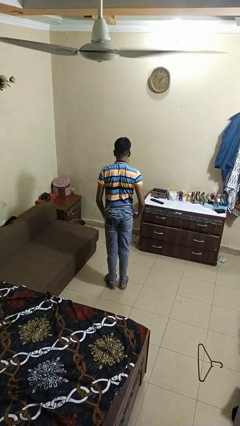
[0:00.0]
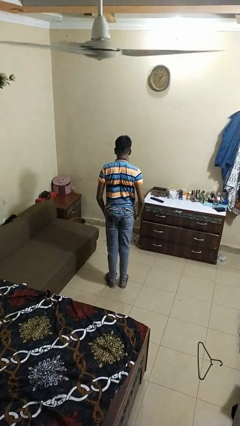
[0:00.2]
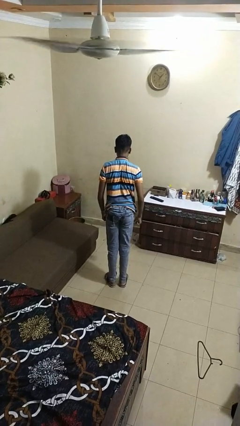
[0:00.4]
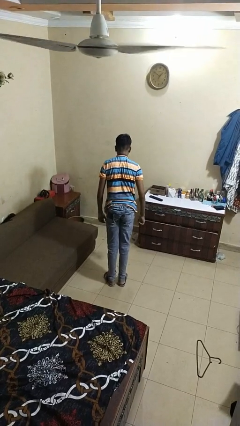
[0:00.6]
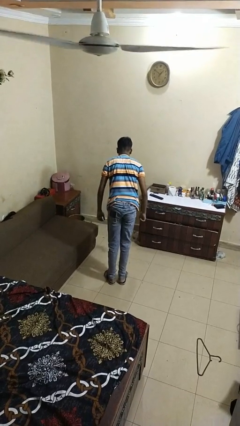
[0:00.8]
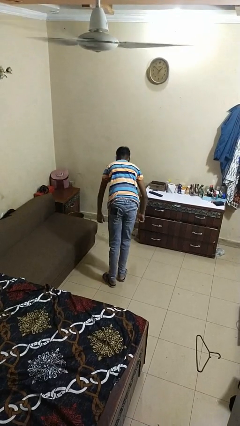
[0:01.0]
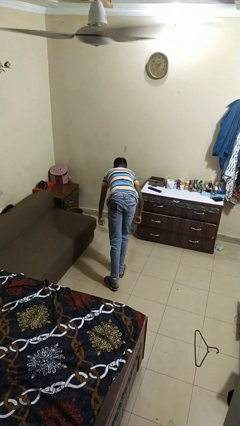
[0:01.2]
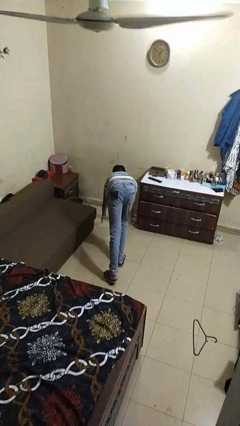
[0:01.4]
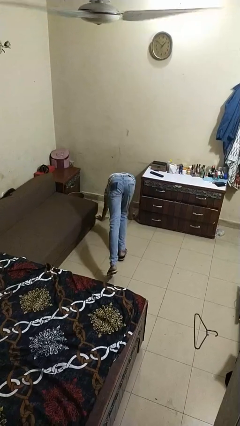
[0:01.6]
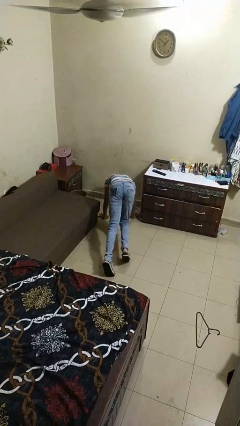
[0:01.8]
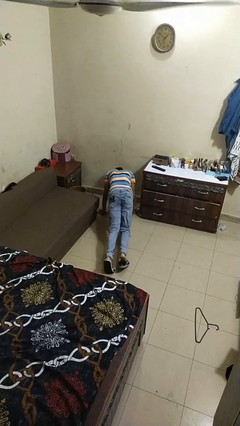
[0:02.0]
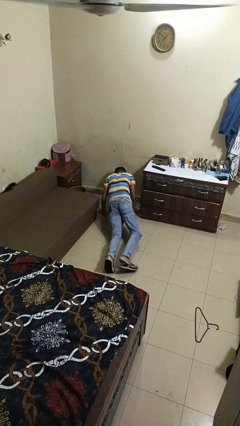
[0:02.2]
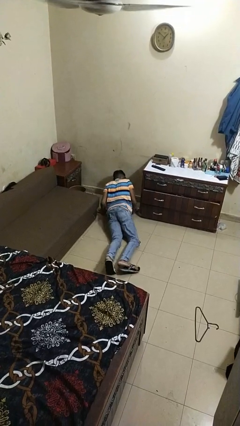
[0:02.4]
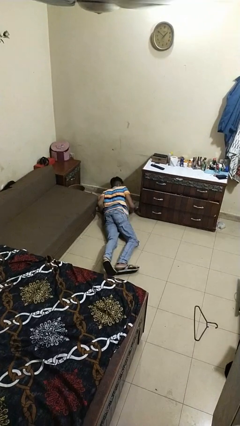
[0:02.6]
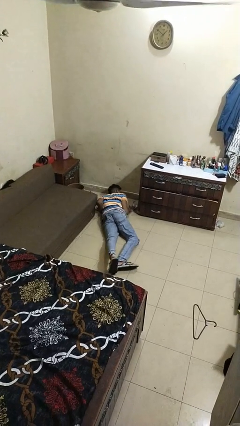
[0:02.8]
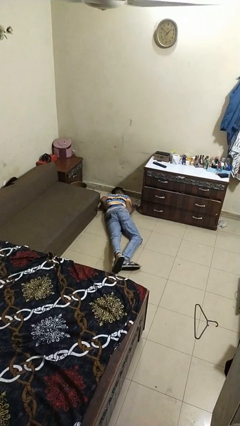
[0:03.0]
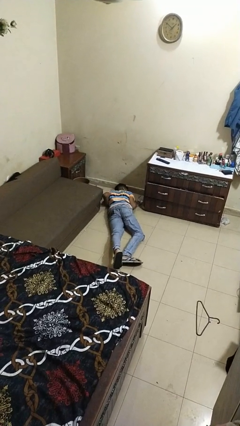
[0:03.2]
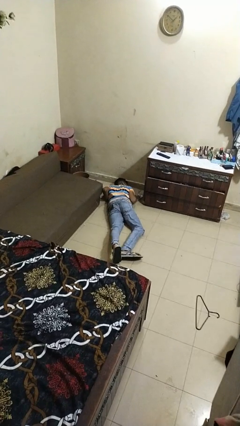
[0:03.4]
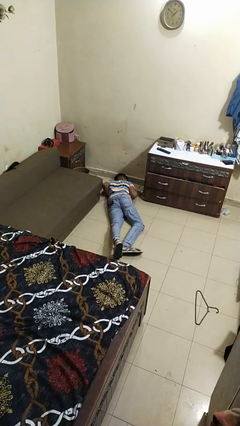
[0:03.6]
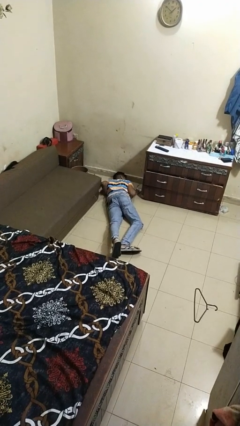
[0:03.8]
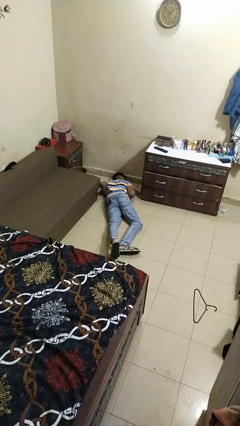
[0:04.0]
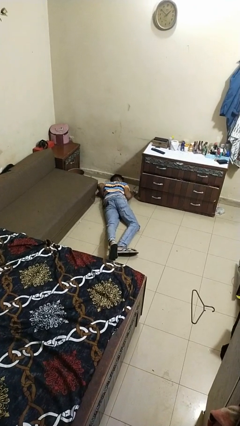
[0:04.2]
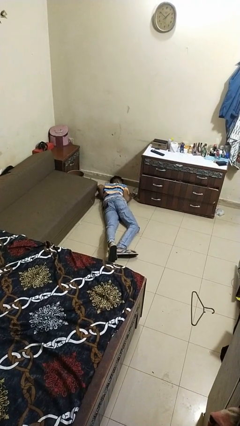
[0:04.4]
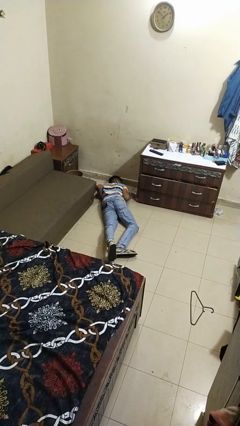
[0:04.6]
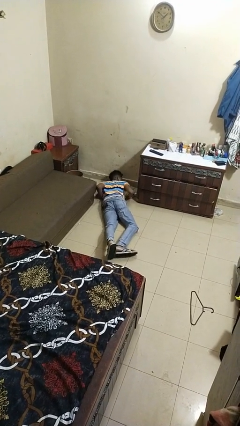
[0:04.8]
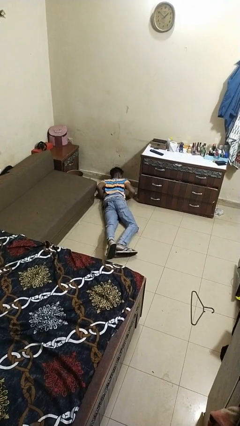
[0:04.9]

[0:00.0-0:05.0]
person trips on object on floor

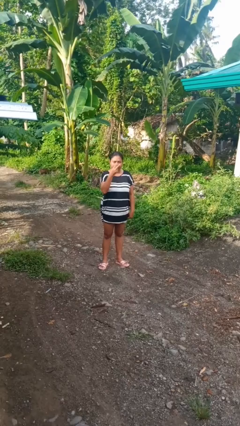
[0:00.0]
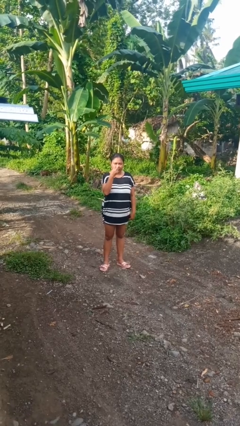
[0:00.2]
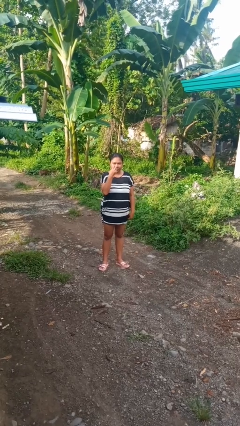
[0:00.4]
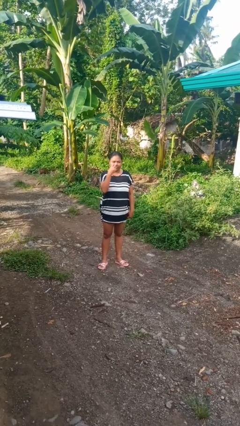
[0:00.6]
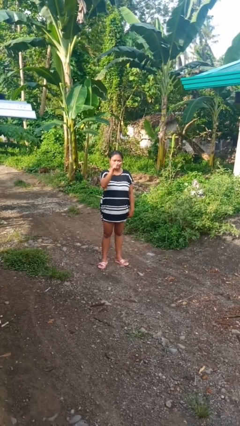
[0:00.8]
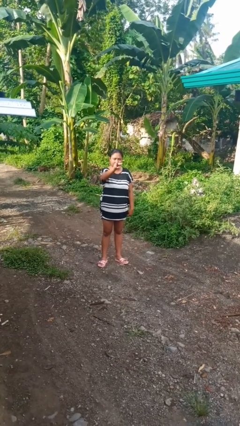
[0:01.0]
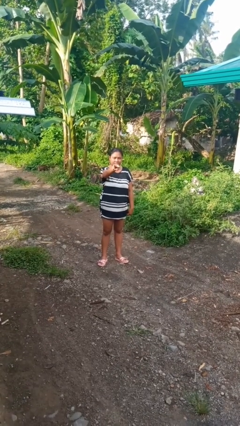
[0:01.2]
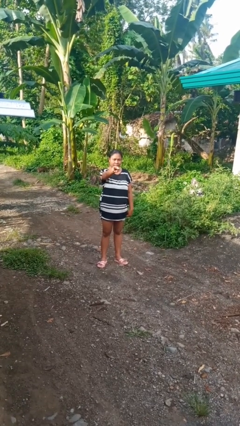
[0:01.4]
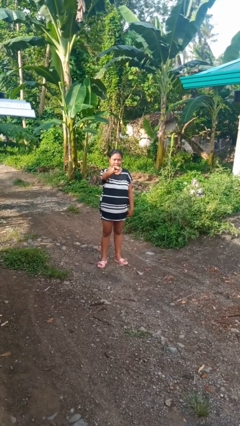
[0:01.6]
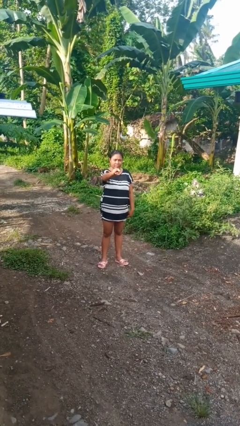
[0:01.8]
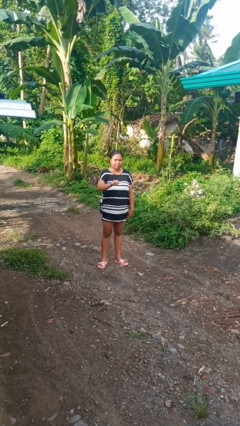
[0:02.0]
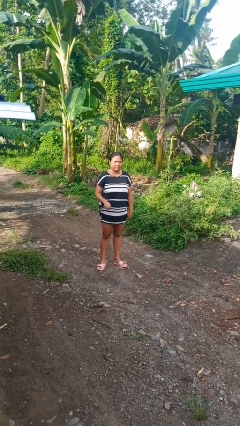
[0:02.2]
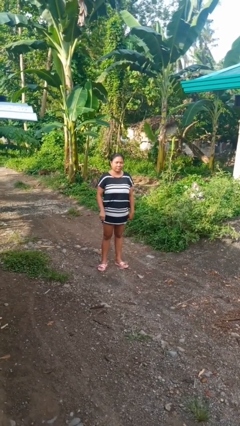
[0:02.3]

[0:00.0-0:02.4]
person gestures watch closely

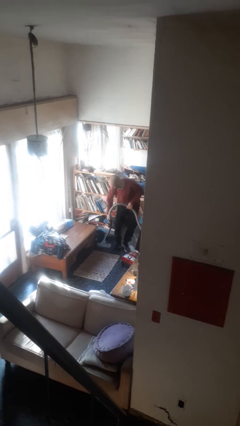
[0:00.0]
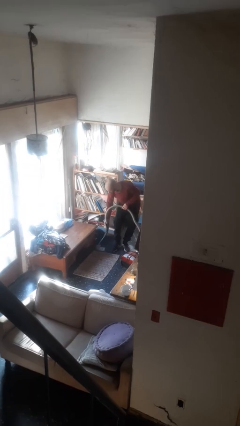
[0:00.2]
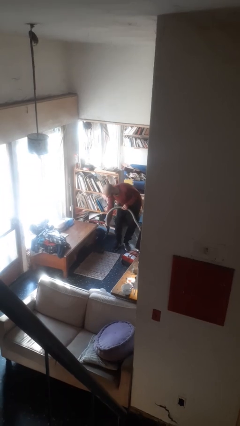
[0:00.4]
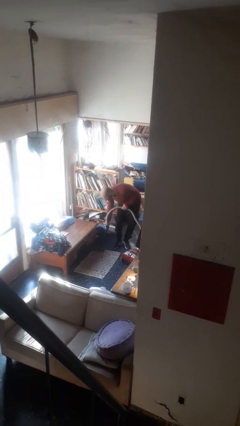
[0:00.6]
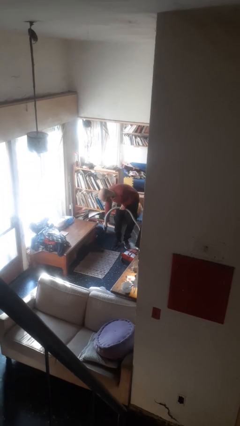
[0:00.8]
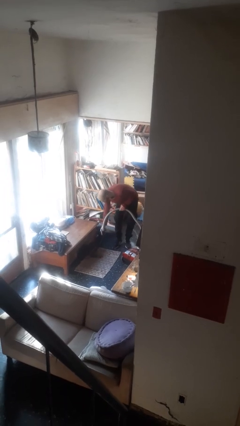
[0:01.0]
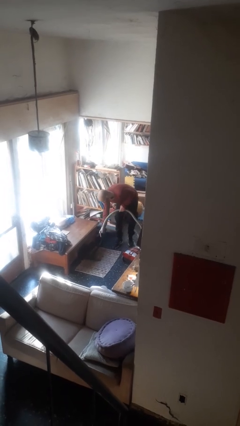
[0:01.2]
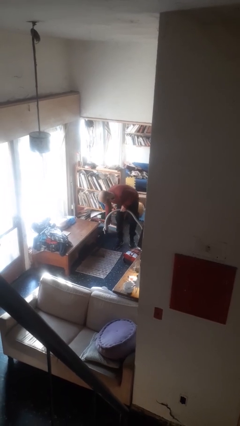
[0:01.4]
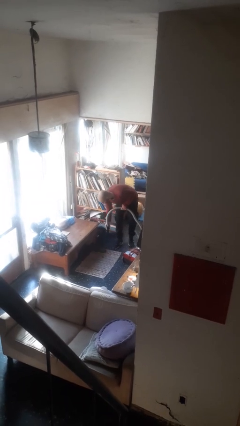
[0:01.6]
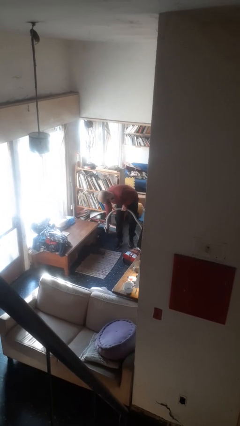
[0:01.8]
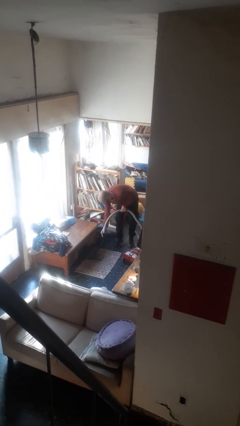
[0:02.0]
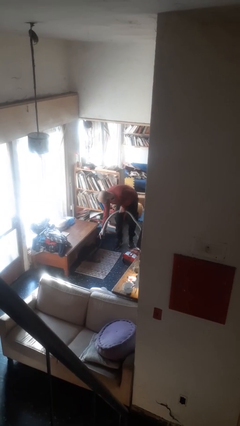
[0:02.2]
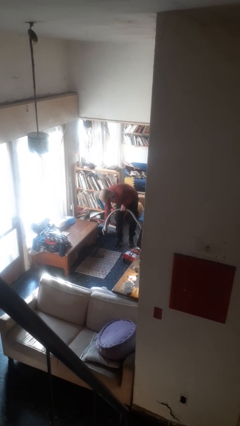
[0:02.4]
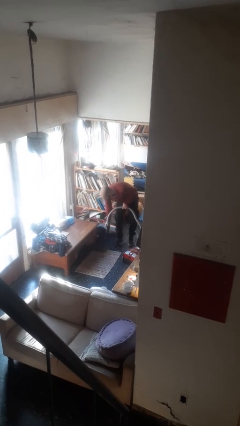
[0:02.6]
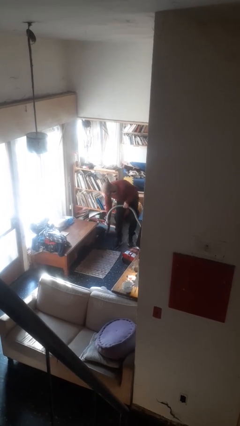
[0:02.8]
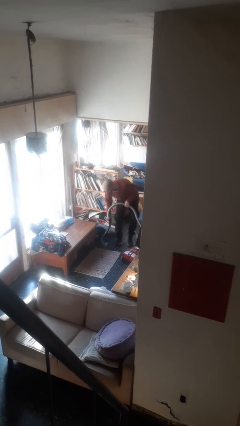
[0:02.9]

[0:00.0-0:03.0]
person vacuums carpet

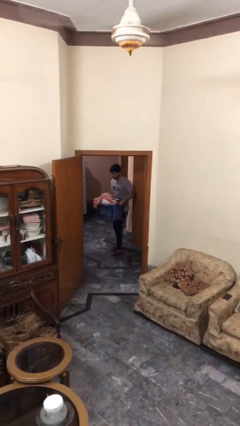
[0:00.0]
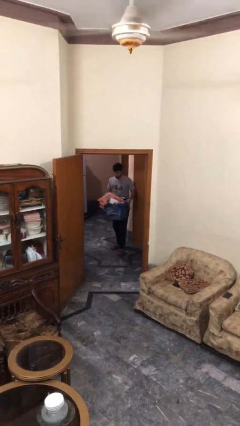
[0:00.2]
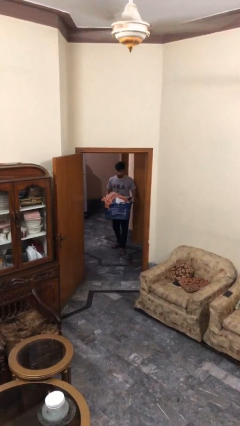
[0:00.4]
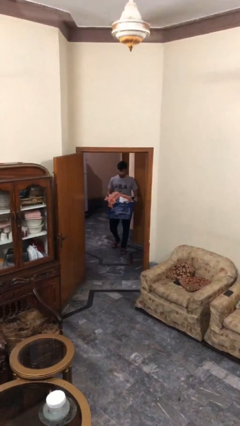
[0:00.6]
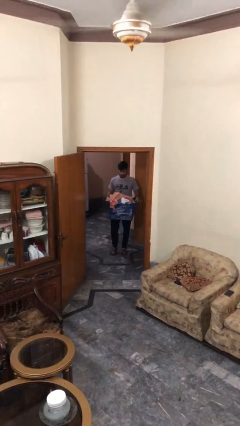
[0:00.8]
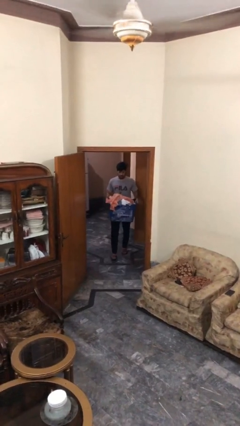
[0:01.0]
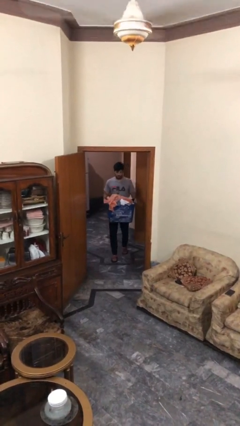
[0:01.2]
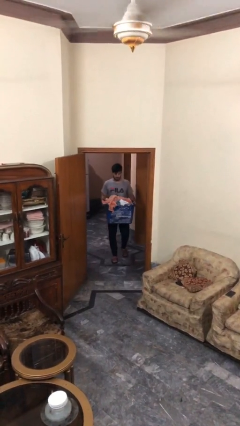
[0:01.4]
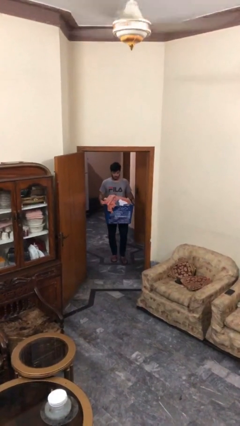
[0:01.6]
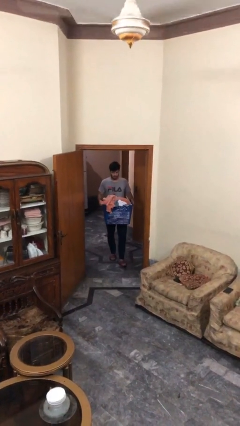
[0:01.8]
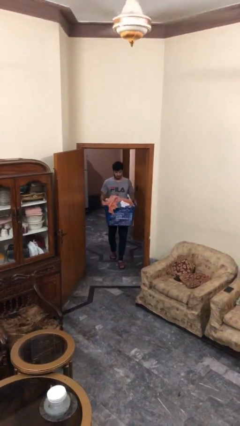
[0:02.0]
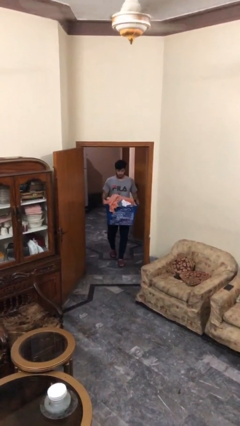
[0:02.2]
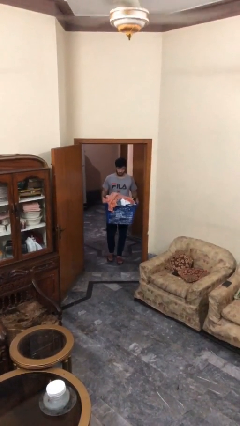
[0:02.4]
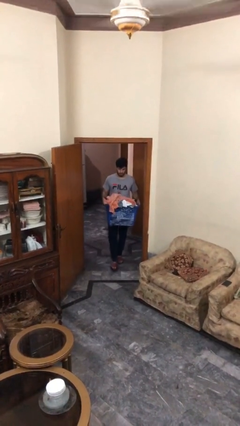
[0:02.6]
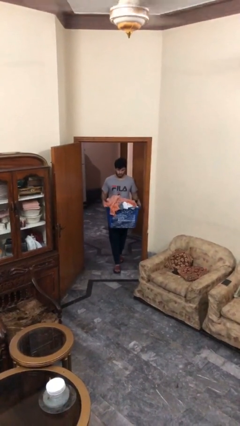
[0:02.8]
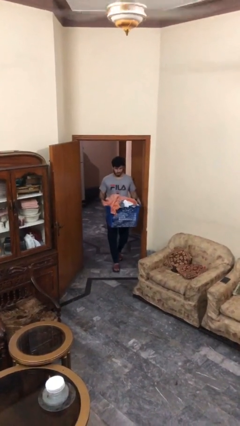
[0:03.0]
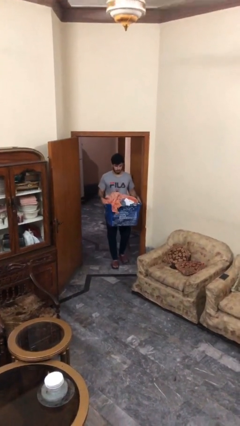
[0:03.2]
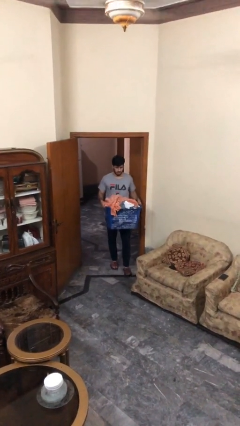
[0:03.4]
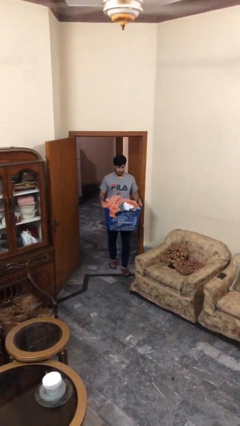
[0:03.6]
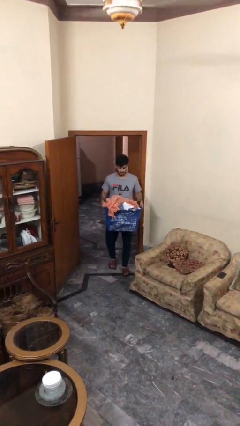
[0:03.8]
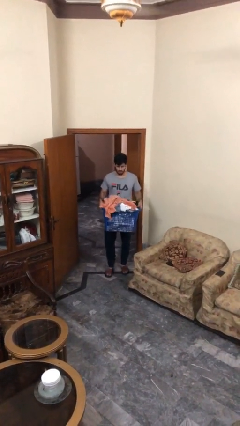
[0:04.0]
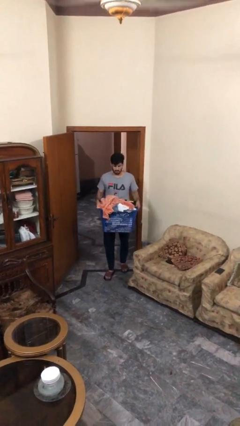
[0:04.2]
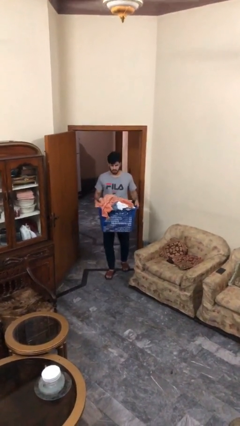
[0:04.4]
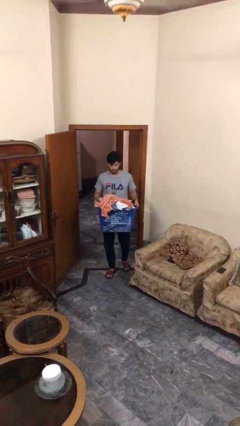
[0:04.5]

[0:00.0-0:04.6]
person carries laundry basket

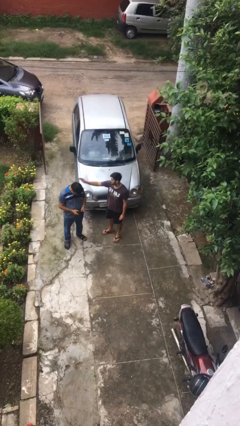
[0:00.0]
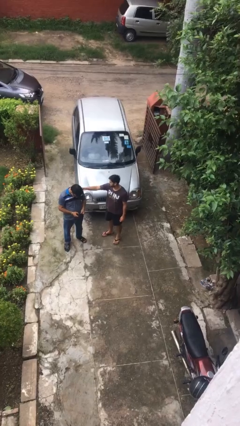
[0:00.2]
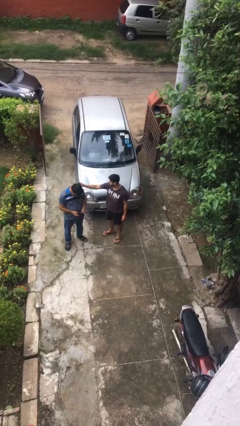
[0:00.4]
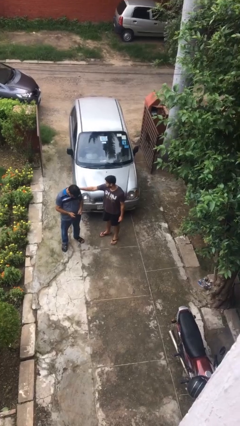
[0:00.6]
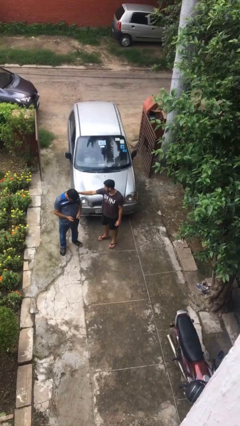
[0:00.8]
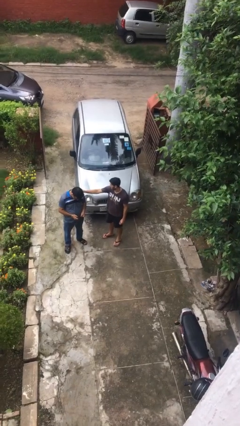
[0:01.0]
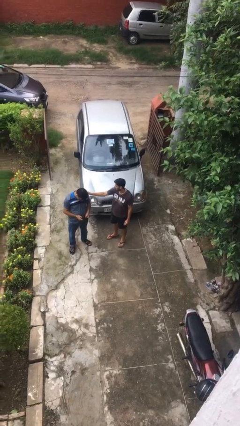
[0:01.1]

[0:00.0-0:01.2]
person pounds shoulders of person

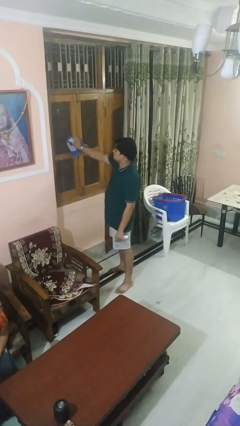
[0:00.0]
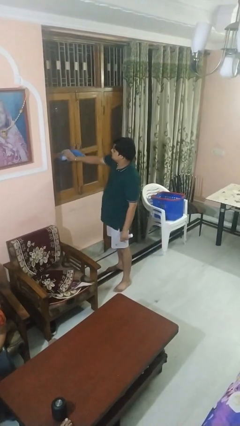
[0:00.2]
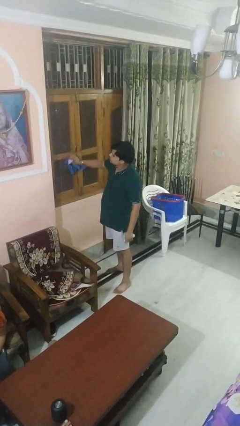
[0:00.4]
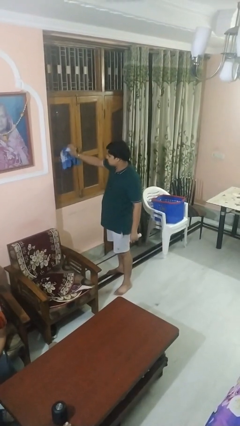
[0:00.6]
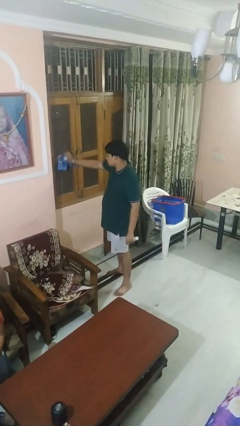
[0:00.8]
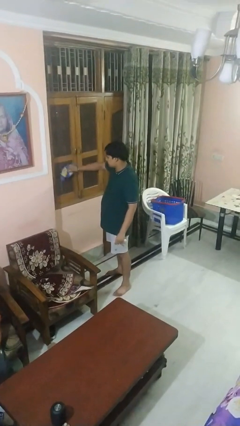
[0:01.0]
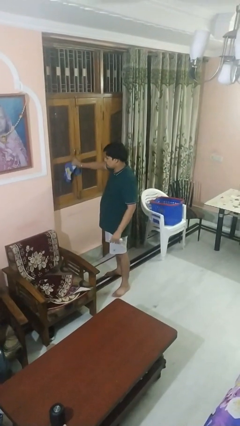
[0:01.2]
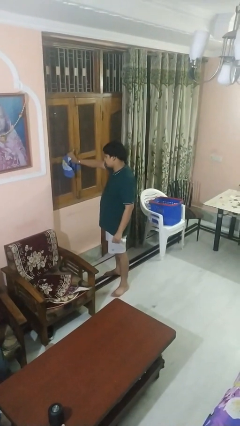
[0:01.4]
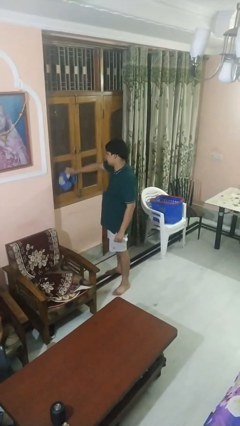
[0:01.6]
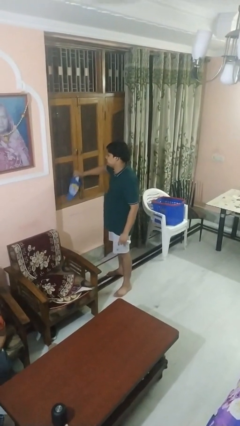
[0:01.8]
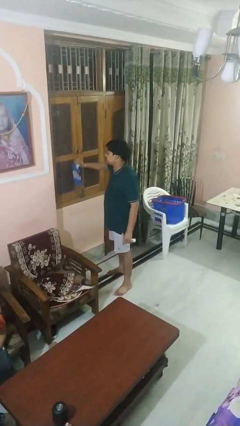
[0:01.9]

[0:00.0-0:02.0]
person washes window
